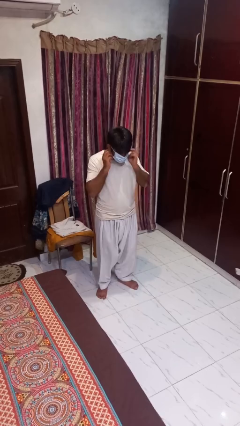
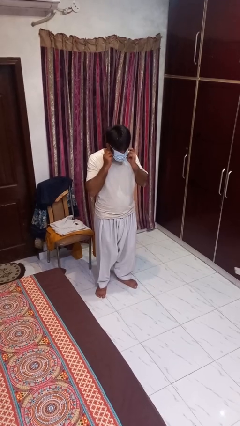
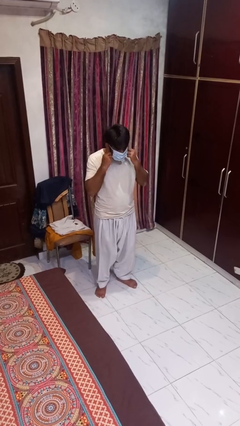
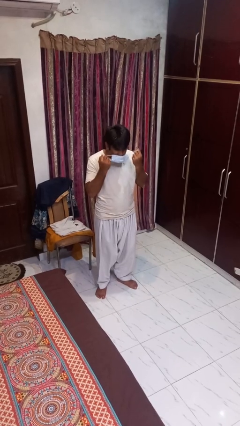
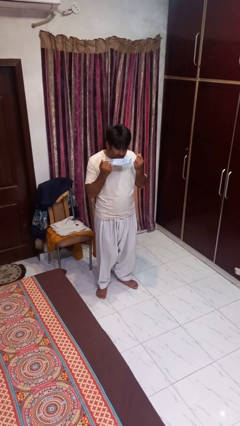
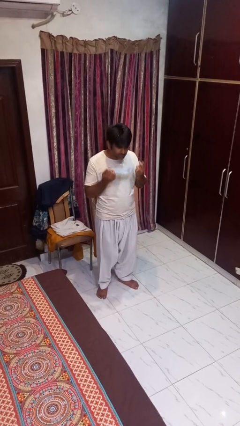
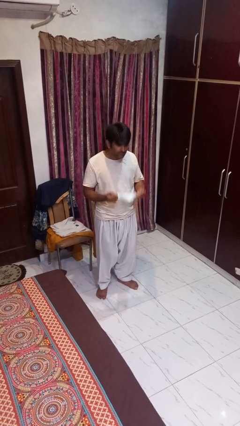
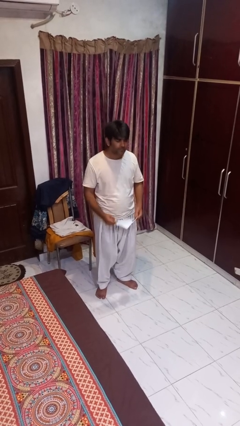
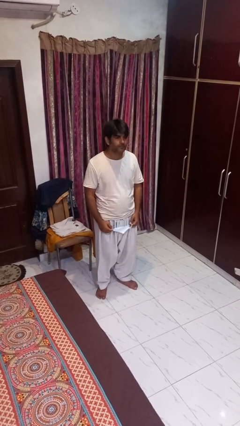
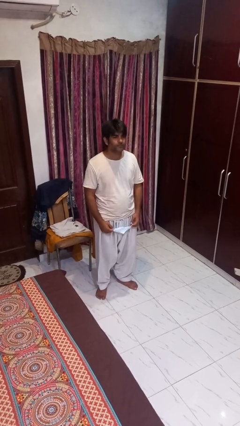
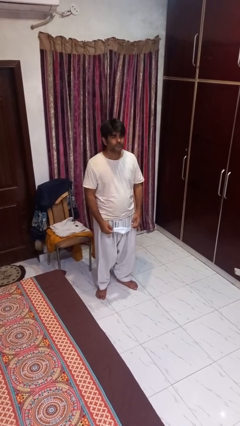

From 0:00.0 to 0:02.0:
person takes off facemask

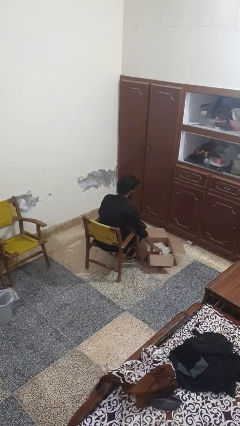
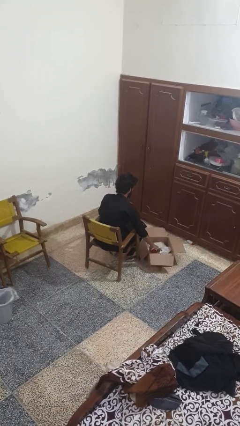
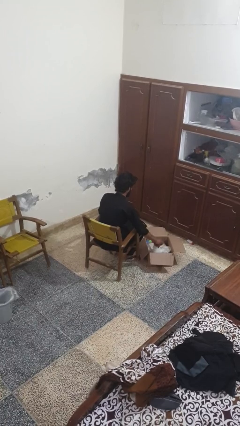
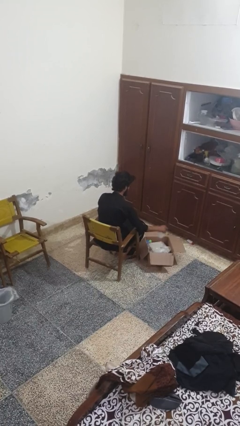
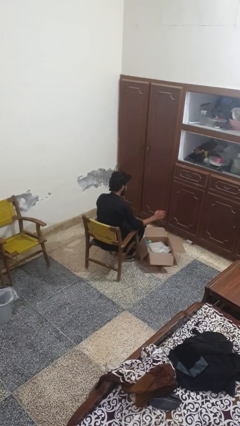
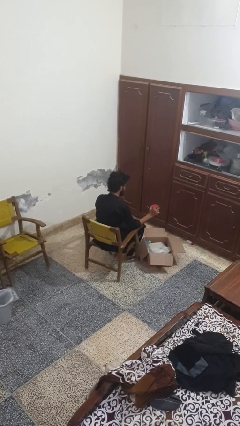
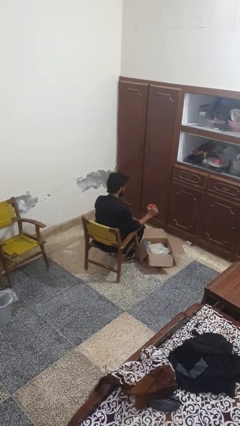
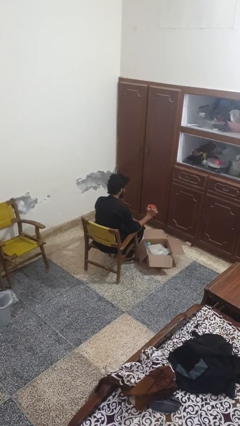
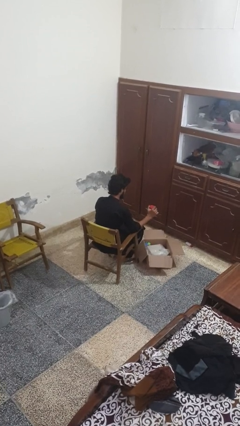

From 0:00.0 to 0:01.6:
person takes object from box

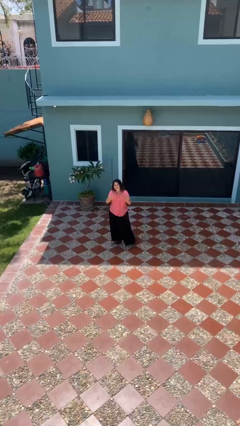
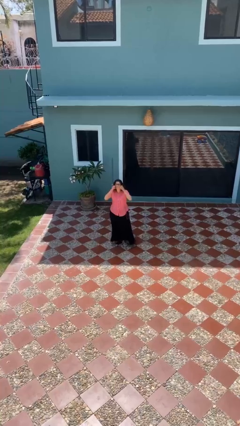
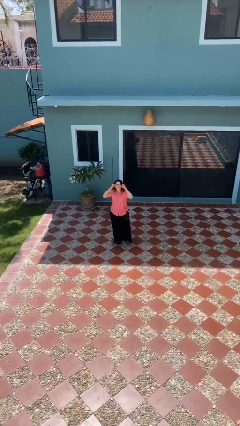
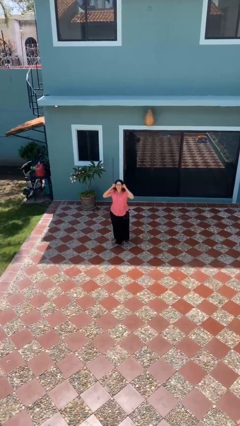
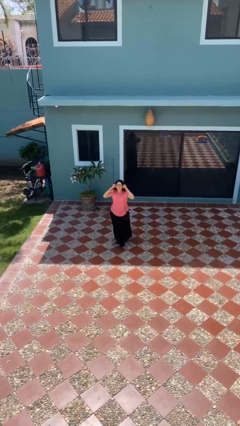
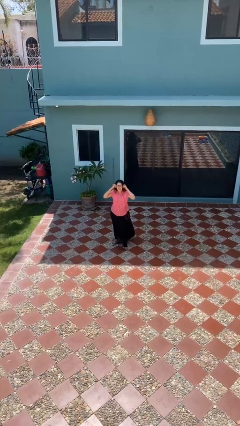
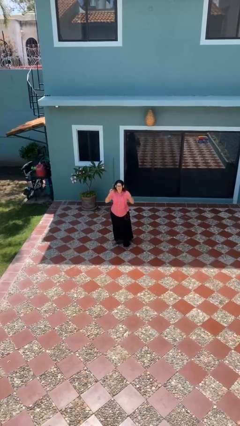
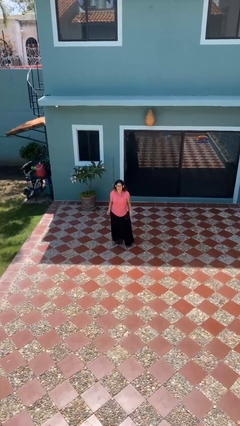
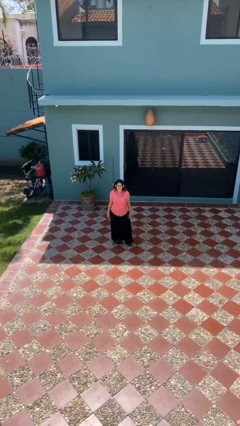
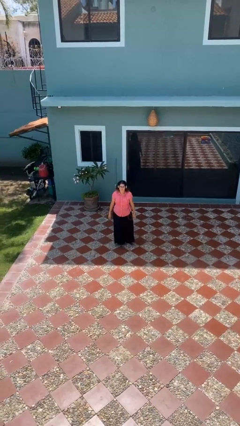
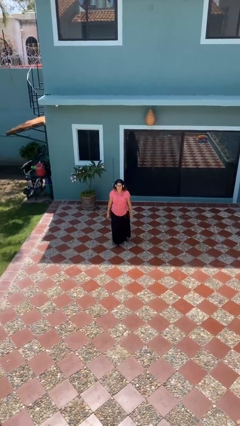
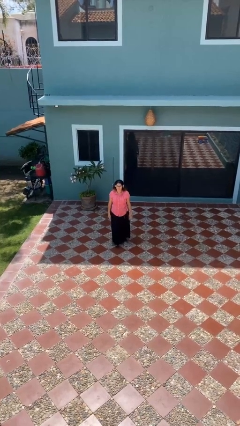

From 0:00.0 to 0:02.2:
person puts on headphones

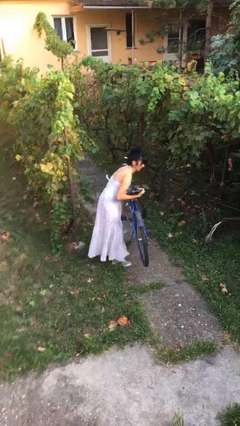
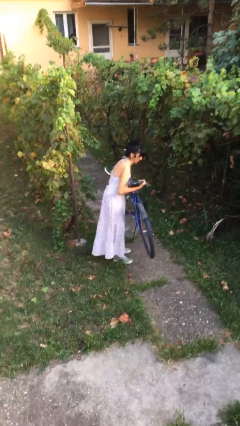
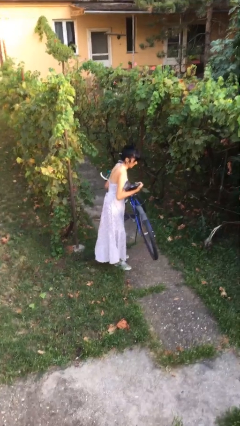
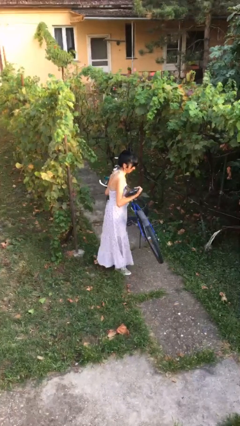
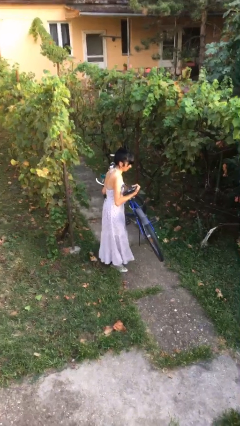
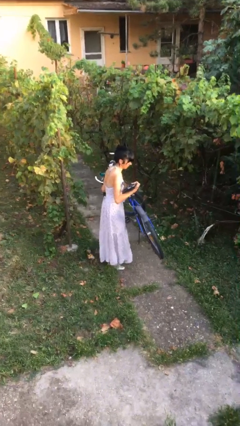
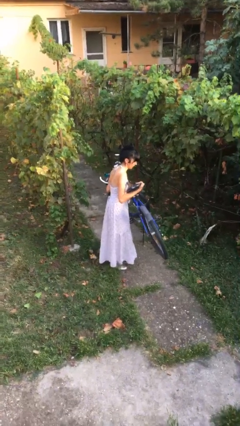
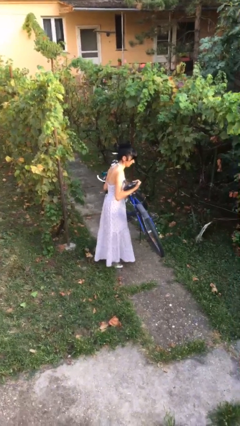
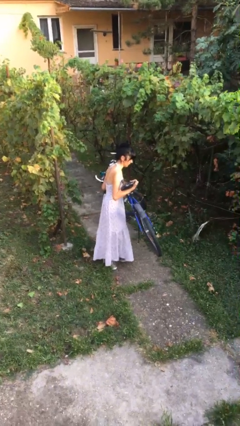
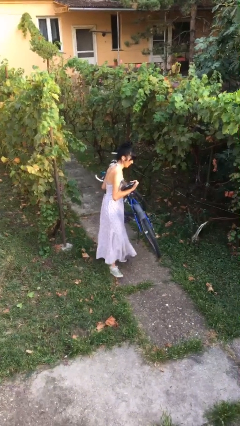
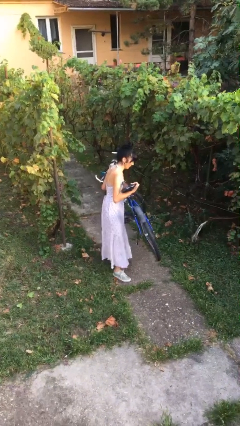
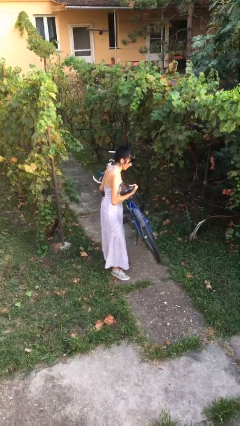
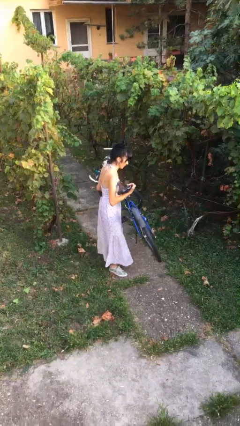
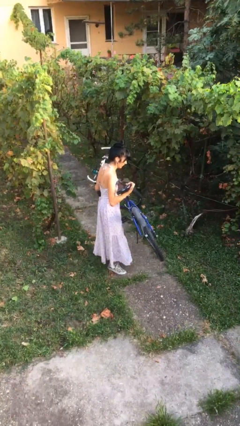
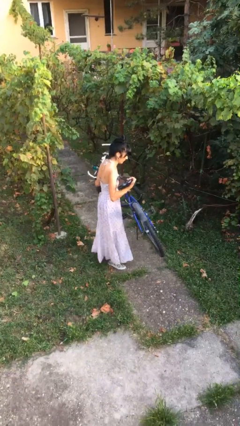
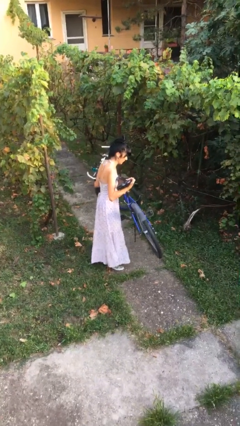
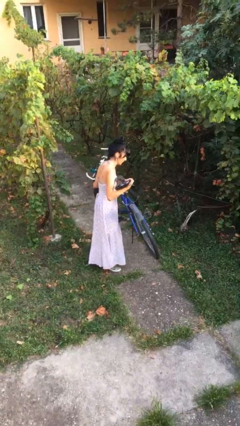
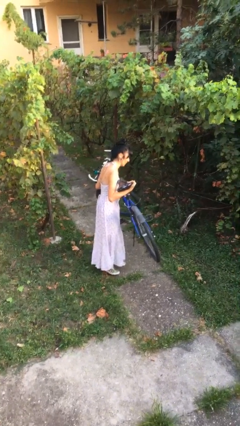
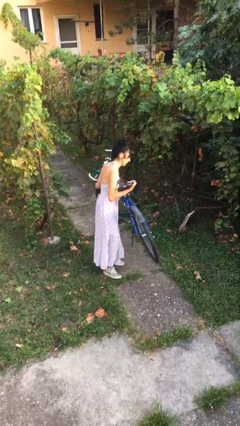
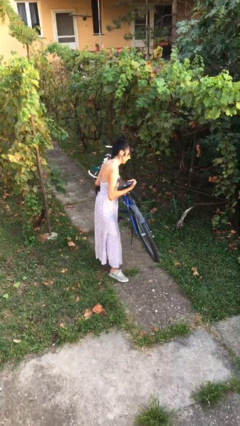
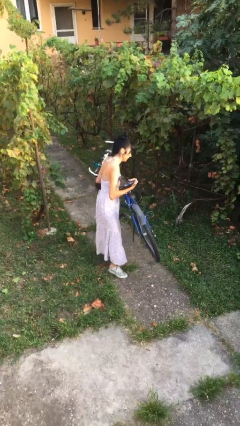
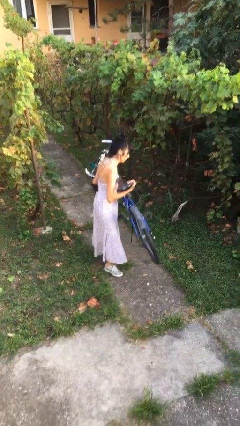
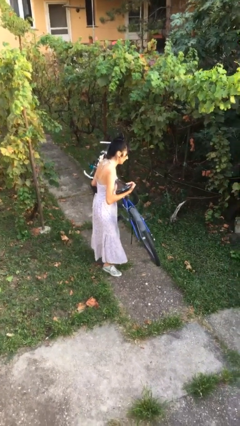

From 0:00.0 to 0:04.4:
person carries heavy object

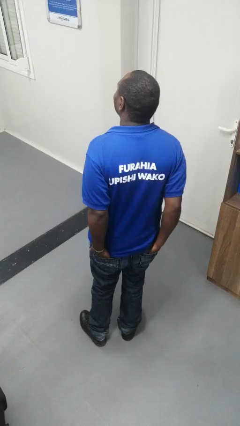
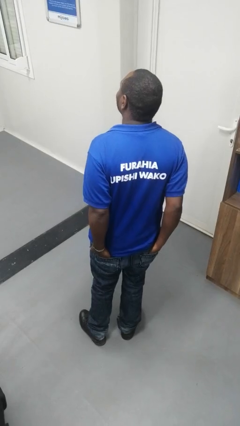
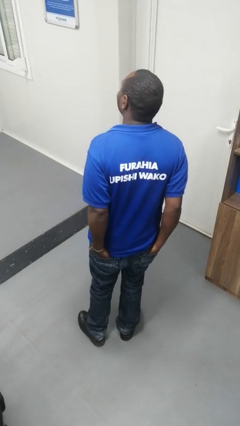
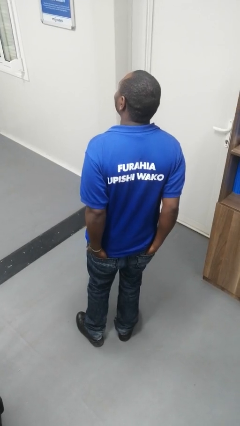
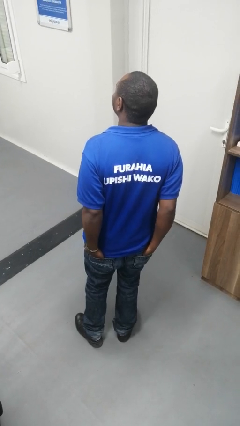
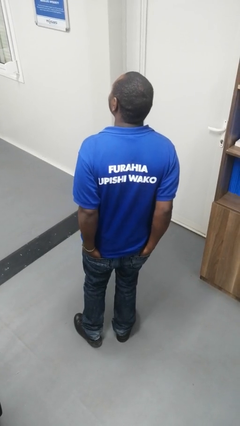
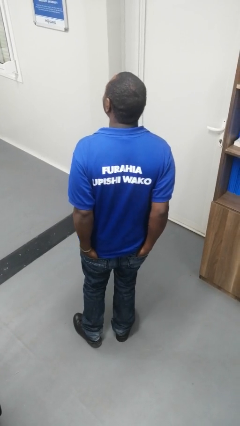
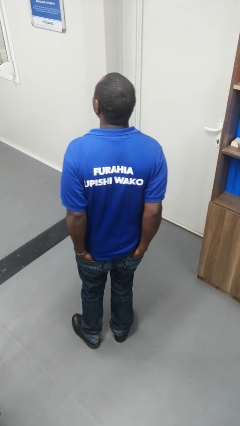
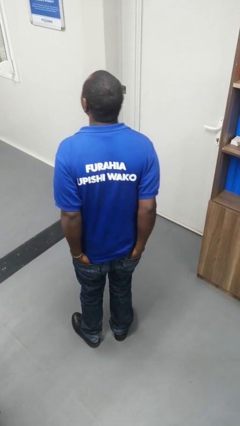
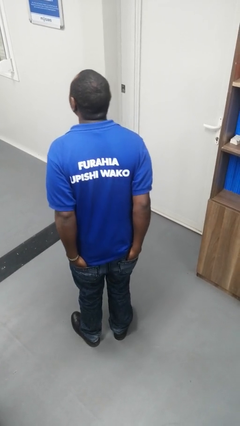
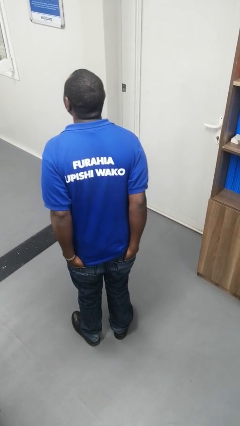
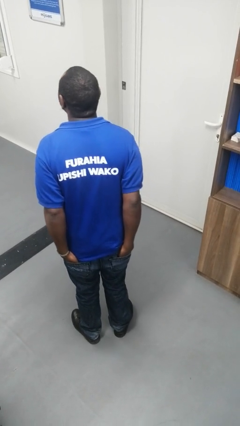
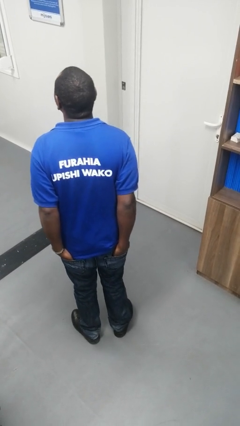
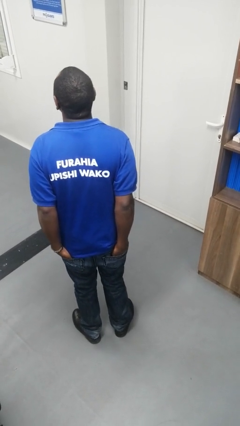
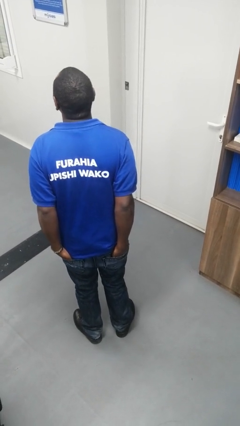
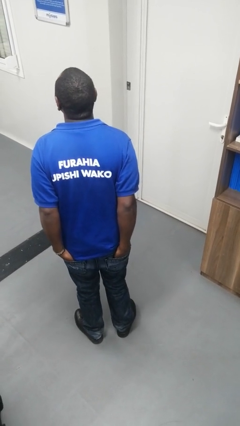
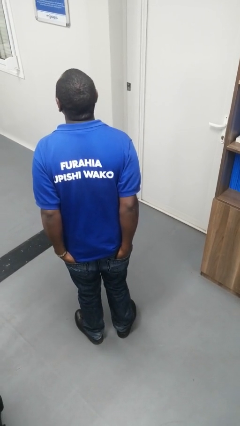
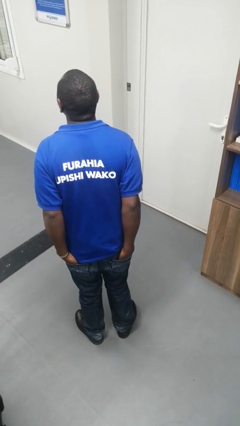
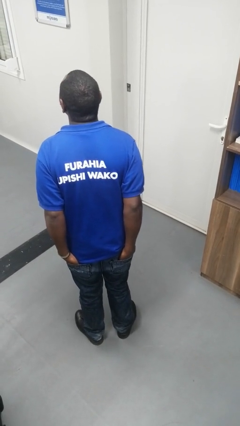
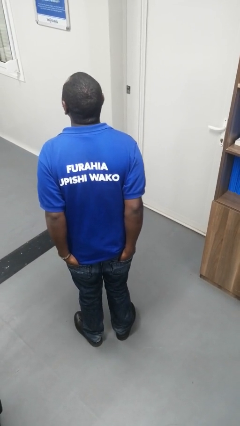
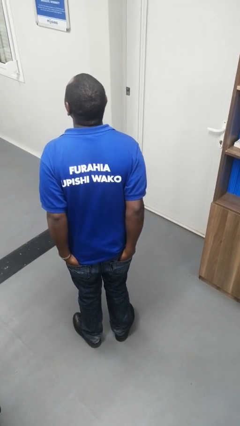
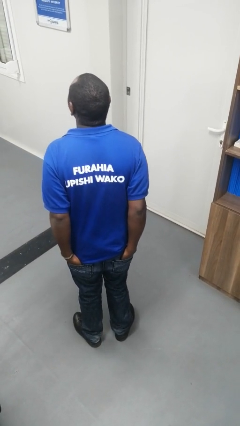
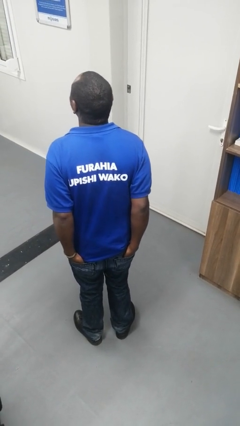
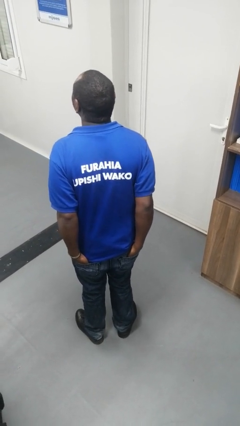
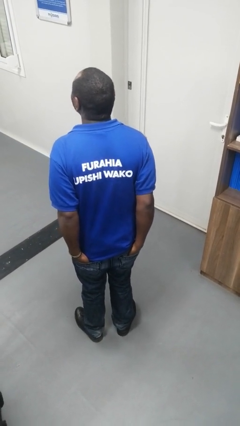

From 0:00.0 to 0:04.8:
person puts hands in back pockets

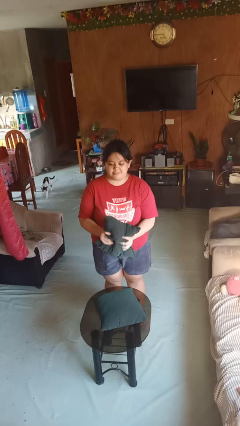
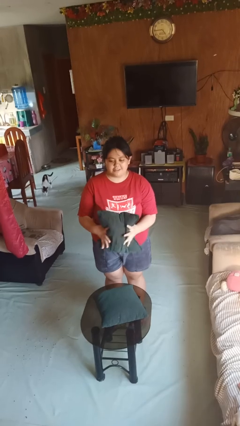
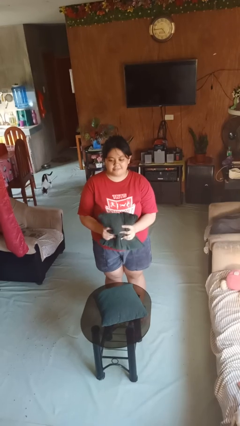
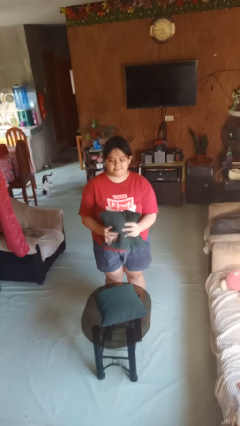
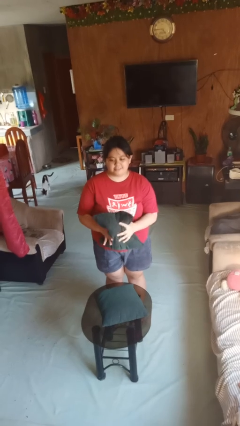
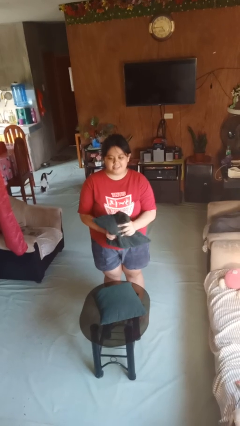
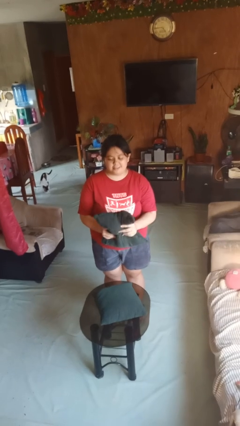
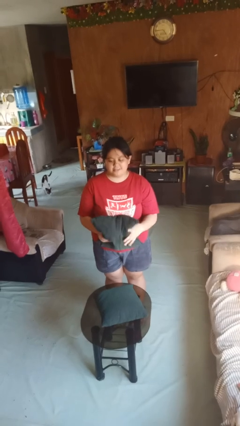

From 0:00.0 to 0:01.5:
person squeezes object

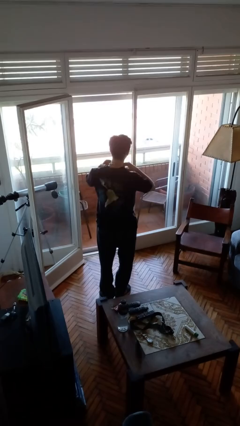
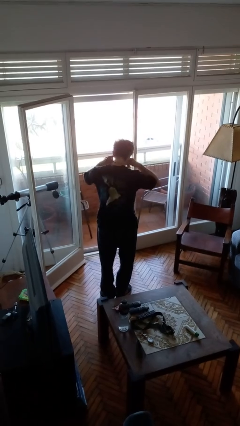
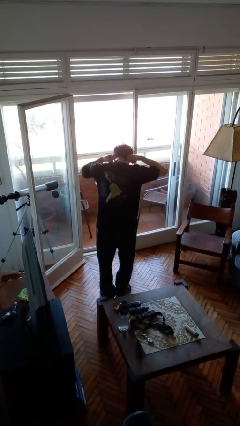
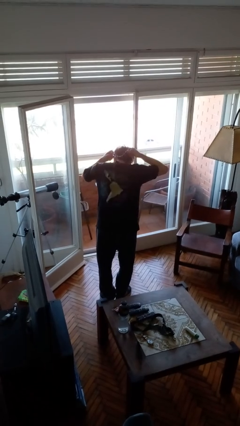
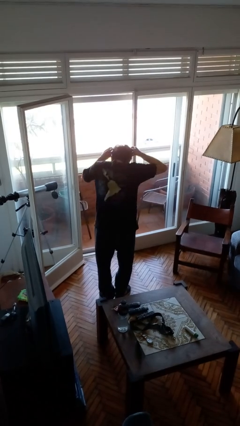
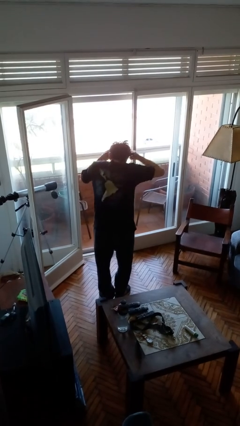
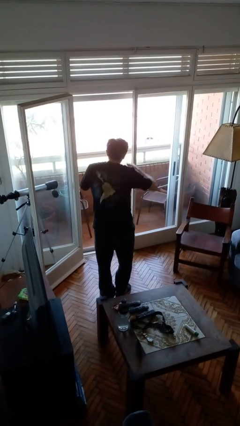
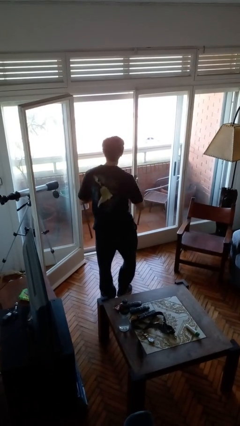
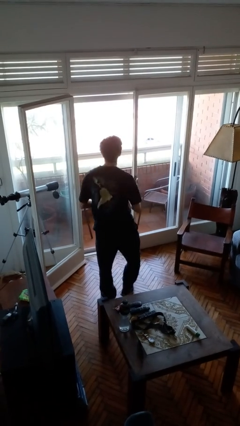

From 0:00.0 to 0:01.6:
person takes off necklace
